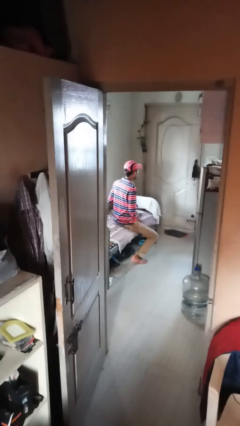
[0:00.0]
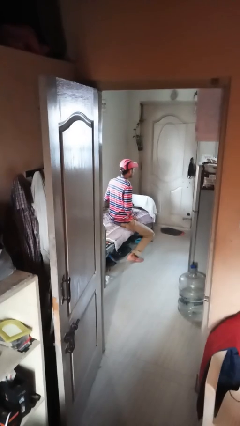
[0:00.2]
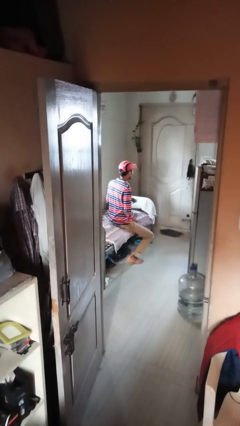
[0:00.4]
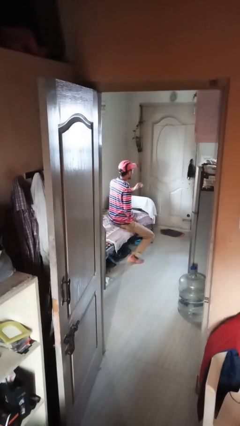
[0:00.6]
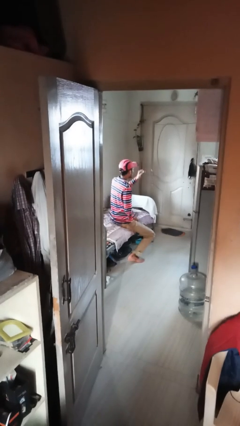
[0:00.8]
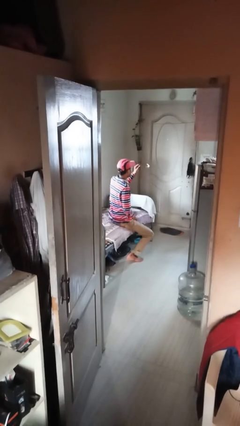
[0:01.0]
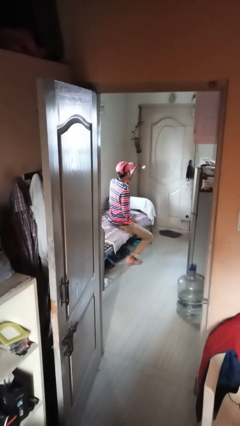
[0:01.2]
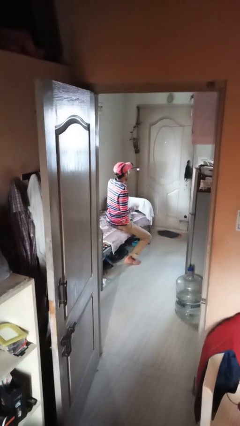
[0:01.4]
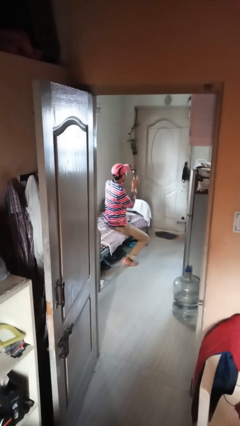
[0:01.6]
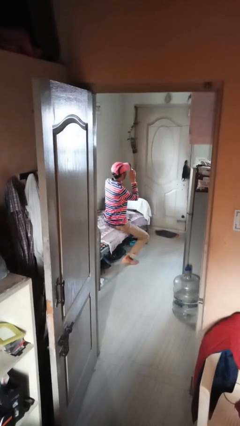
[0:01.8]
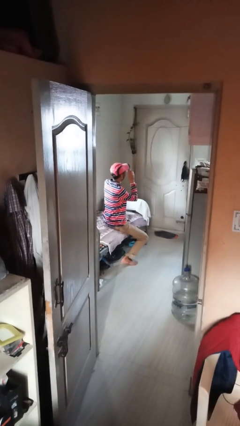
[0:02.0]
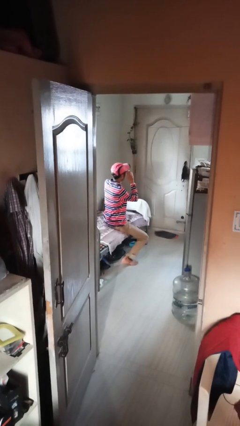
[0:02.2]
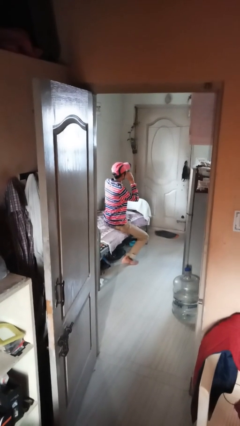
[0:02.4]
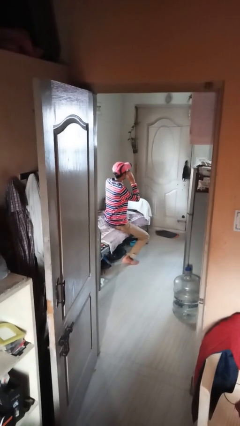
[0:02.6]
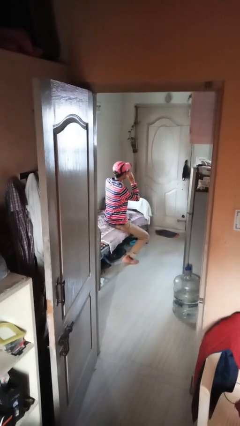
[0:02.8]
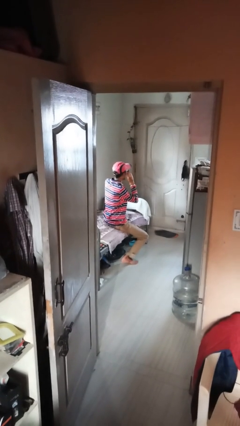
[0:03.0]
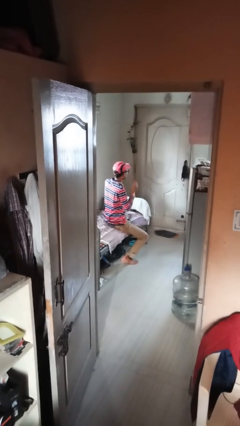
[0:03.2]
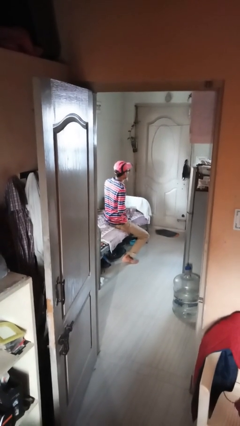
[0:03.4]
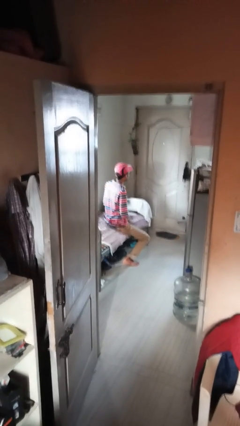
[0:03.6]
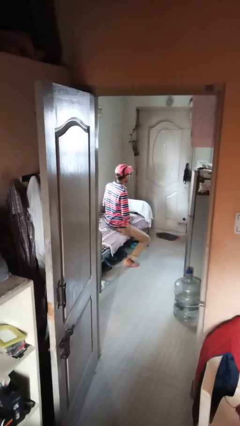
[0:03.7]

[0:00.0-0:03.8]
person puts on glasses

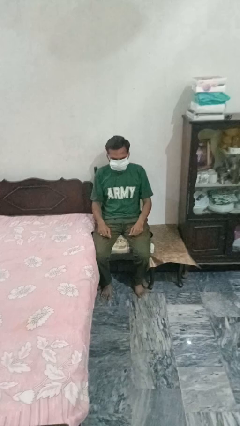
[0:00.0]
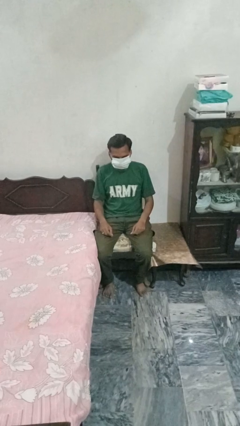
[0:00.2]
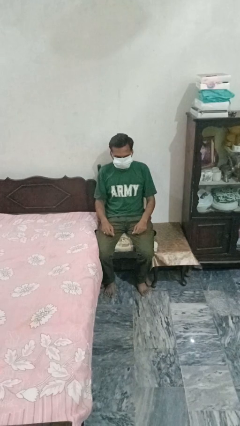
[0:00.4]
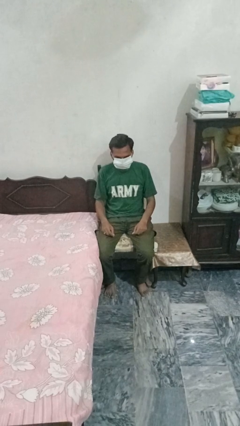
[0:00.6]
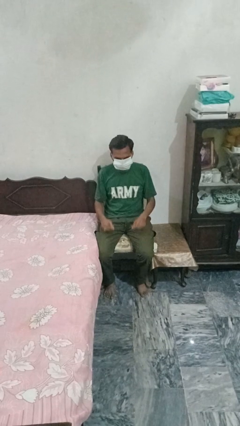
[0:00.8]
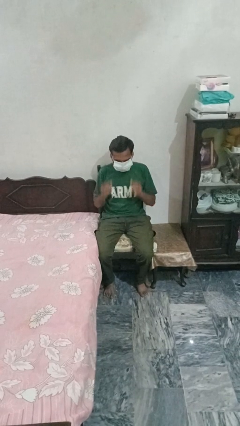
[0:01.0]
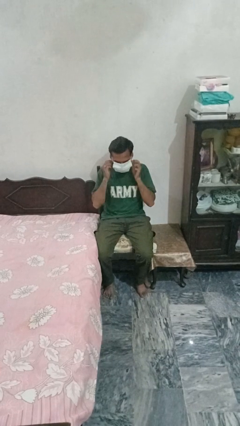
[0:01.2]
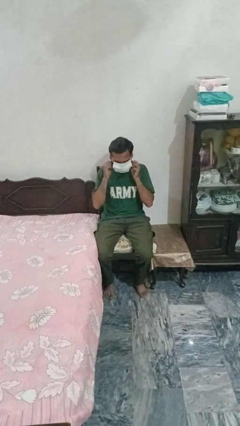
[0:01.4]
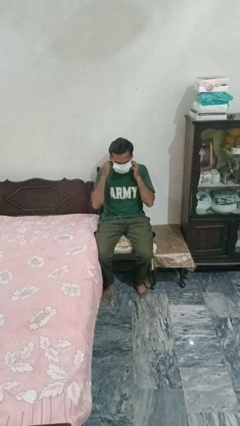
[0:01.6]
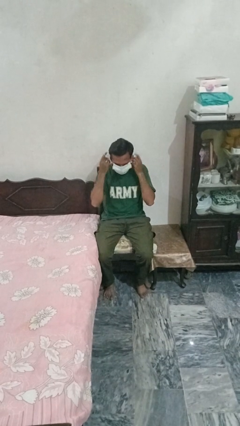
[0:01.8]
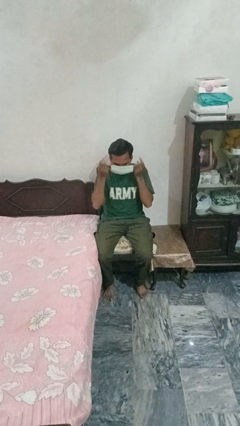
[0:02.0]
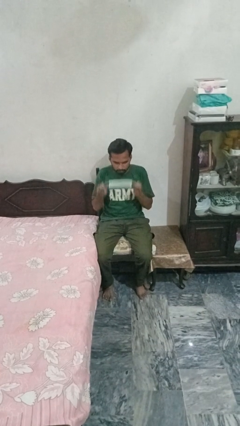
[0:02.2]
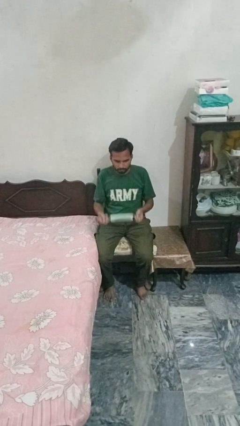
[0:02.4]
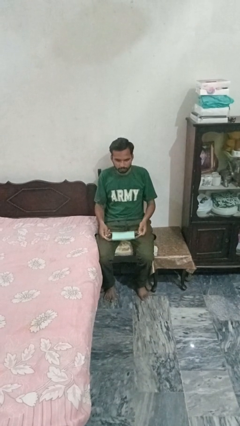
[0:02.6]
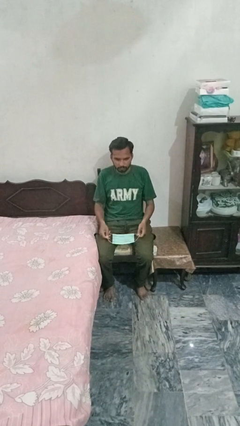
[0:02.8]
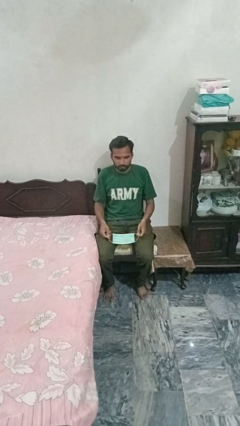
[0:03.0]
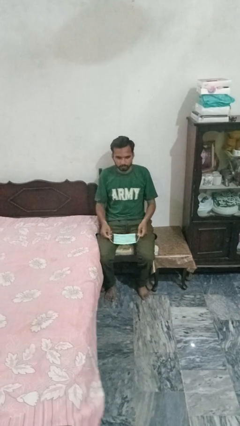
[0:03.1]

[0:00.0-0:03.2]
person takes off facemask

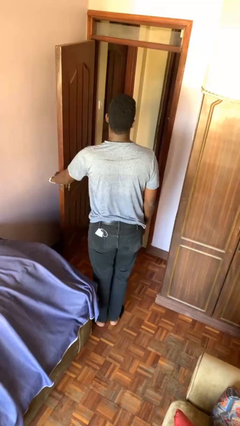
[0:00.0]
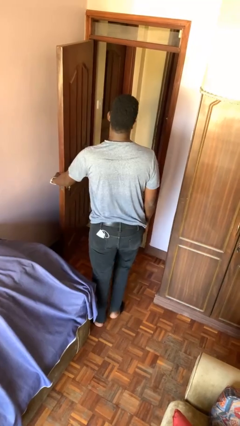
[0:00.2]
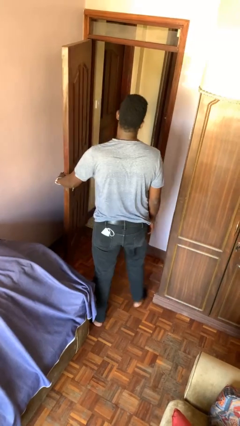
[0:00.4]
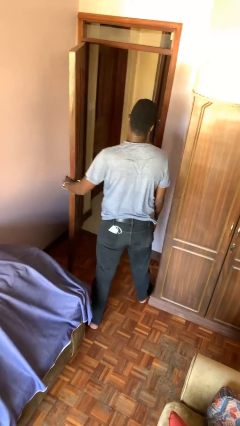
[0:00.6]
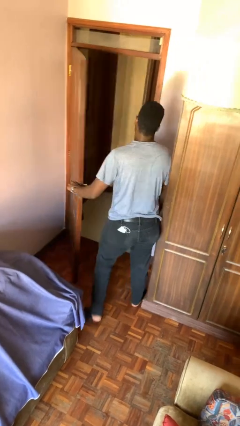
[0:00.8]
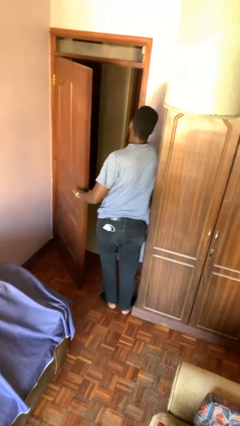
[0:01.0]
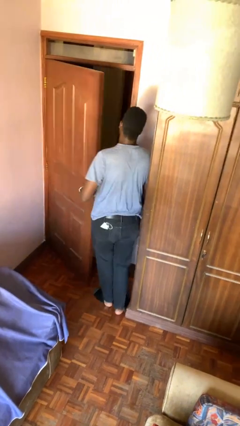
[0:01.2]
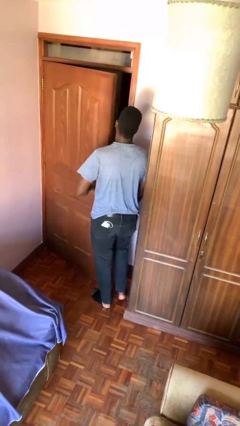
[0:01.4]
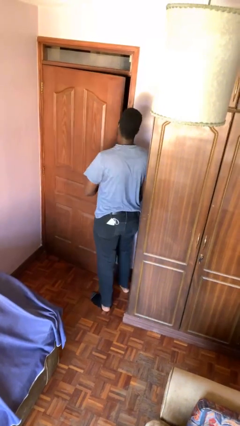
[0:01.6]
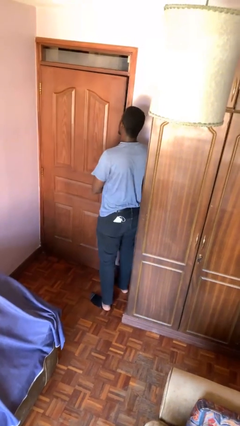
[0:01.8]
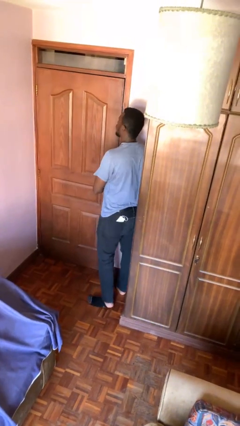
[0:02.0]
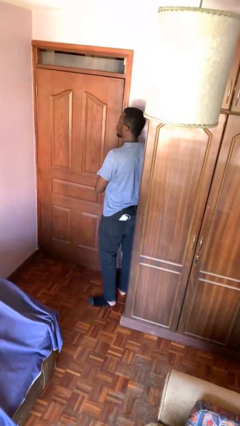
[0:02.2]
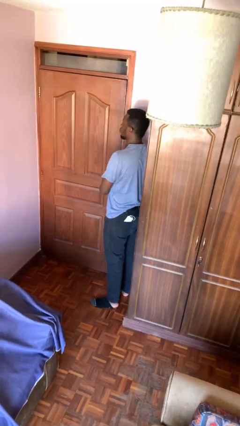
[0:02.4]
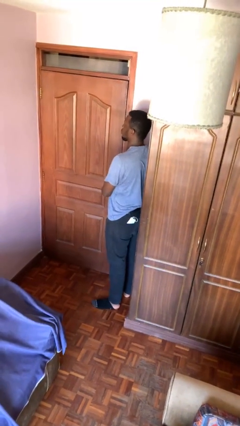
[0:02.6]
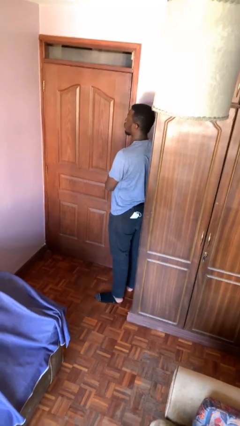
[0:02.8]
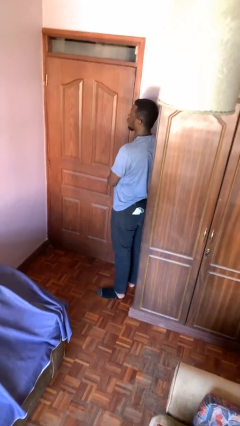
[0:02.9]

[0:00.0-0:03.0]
person closes facility door

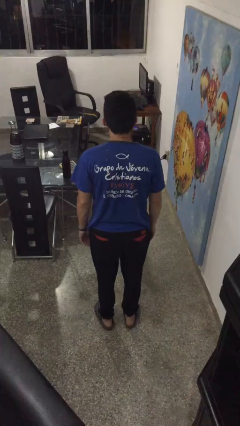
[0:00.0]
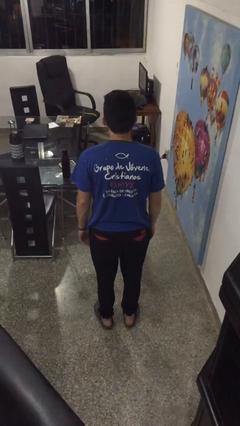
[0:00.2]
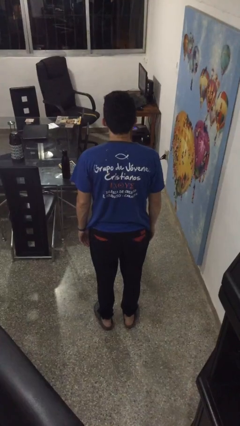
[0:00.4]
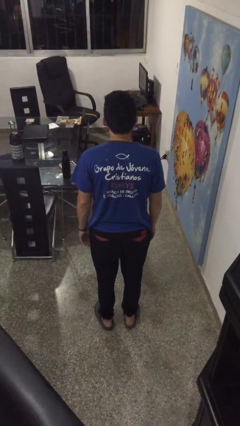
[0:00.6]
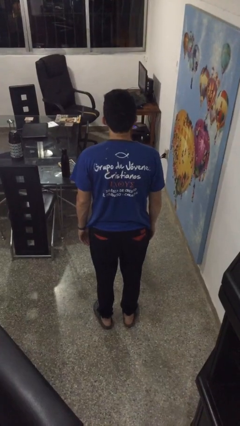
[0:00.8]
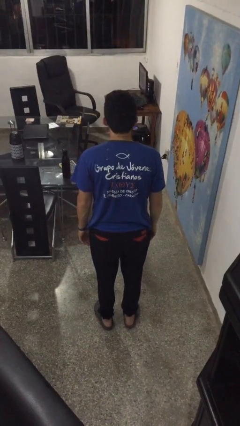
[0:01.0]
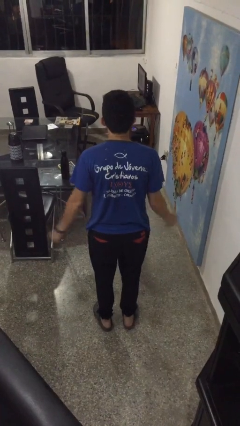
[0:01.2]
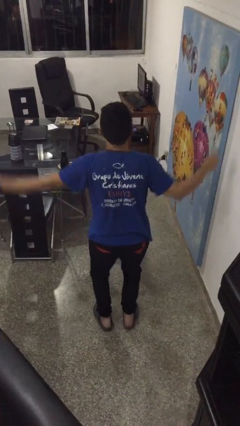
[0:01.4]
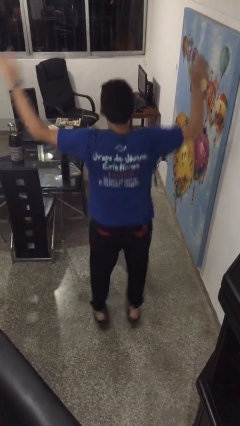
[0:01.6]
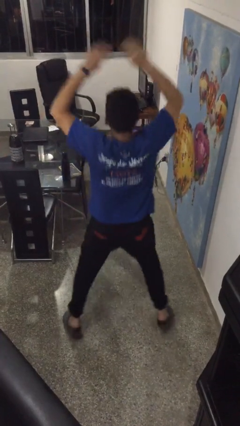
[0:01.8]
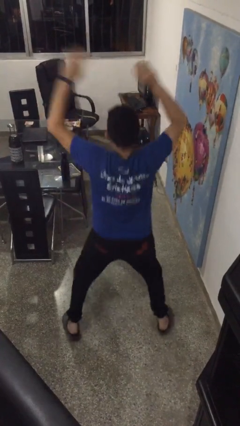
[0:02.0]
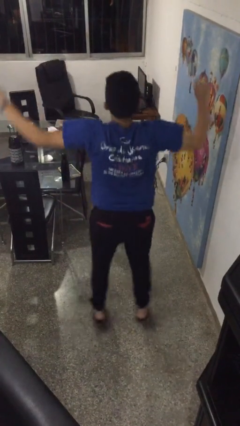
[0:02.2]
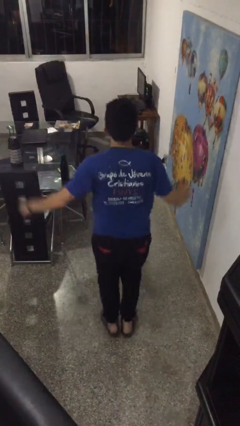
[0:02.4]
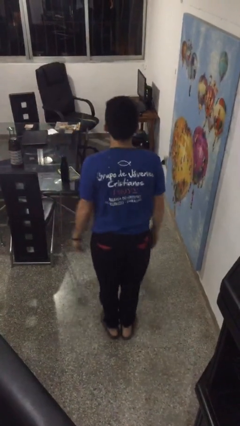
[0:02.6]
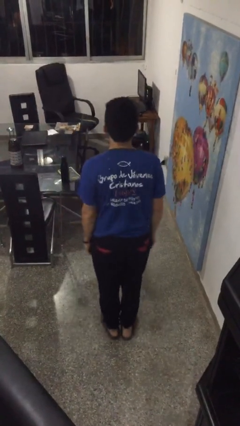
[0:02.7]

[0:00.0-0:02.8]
person exercises with jumping jacks

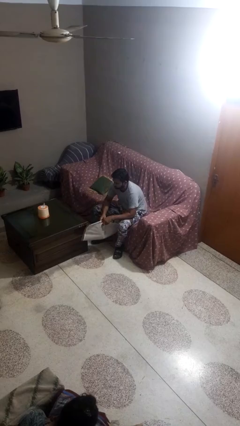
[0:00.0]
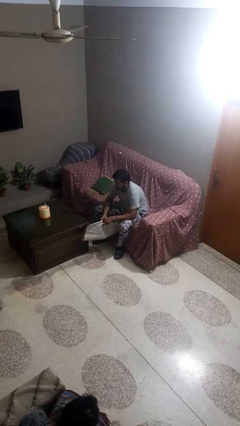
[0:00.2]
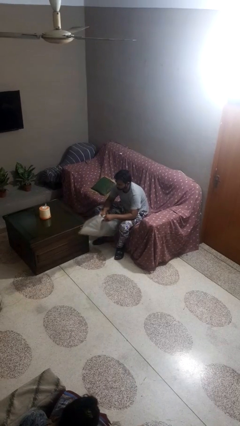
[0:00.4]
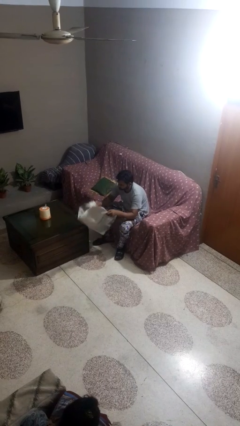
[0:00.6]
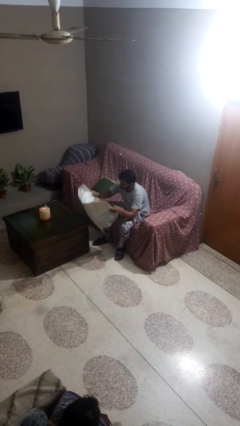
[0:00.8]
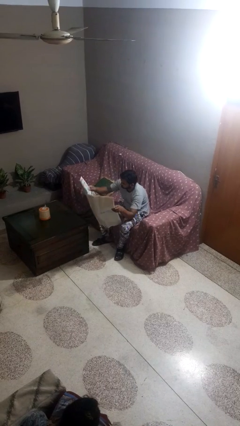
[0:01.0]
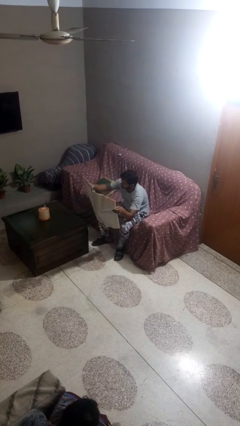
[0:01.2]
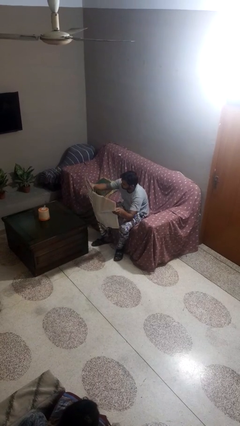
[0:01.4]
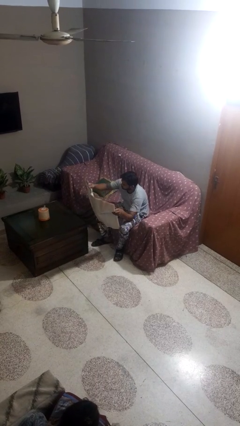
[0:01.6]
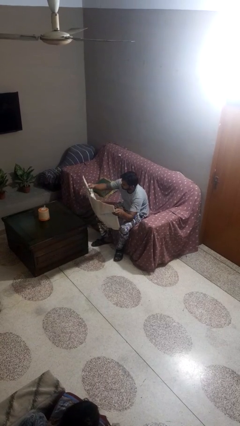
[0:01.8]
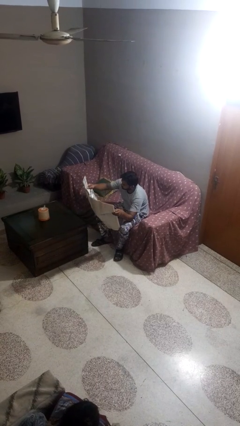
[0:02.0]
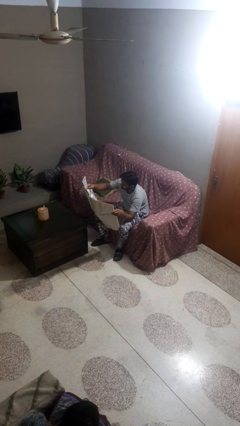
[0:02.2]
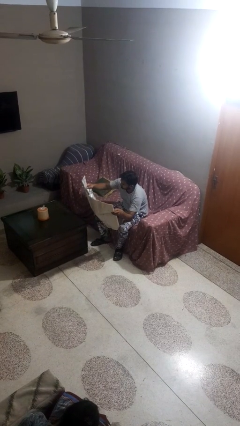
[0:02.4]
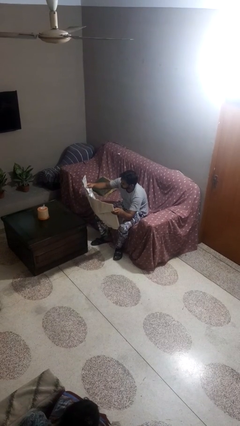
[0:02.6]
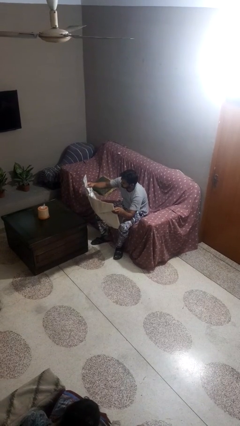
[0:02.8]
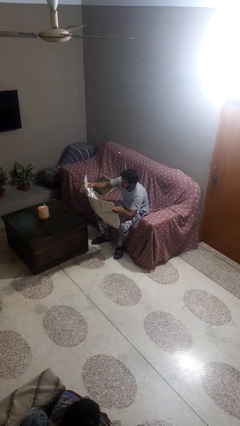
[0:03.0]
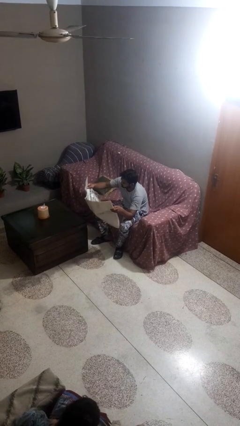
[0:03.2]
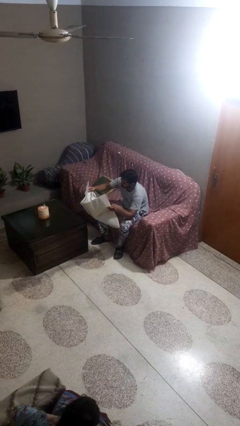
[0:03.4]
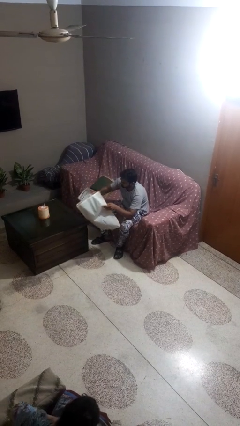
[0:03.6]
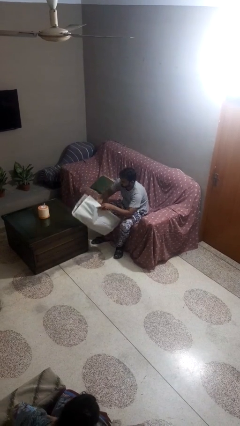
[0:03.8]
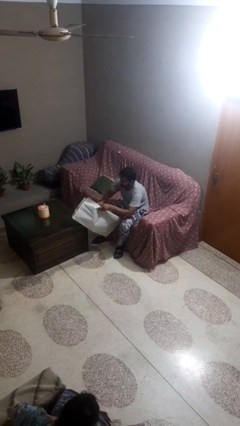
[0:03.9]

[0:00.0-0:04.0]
person reads newspaper

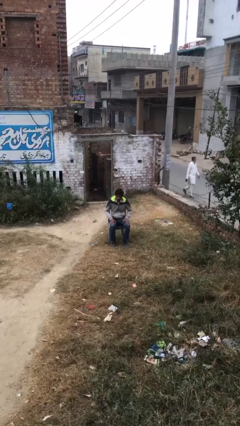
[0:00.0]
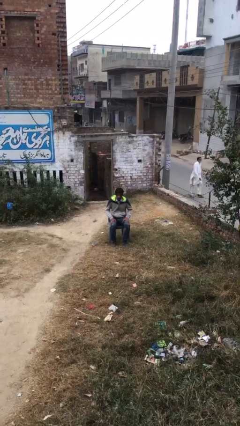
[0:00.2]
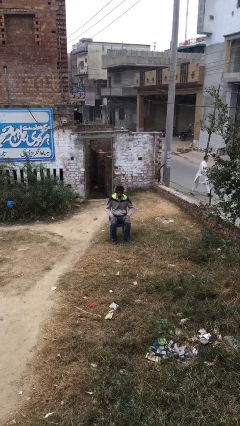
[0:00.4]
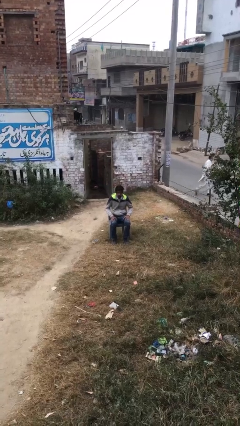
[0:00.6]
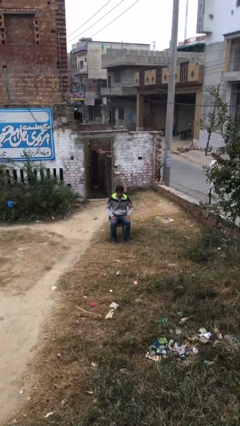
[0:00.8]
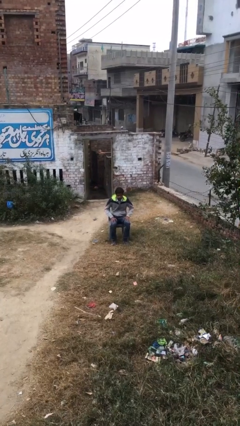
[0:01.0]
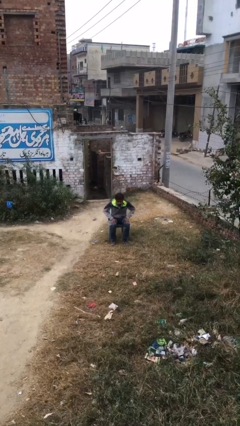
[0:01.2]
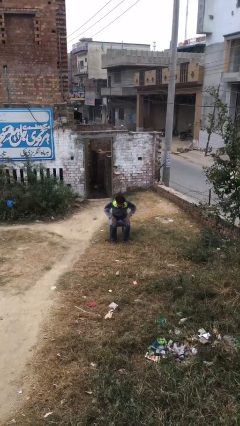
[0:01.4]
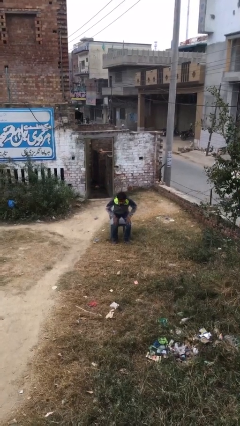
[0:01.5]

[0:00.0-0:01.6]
person sits down
